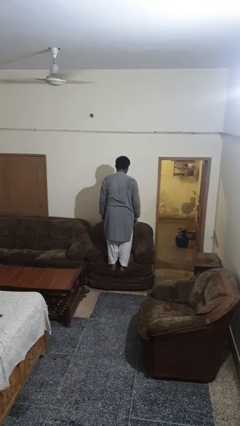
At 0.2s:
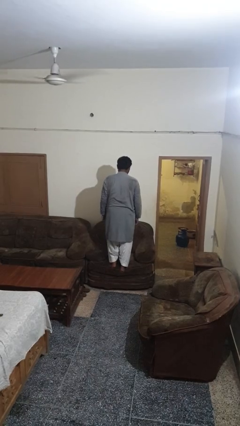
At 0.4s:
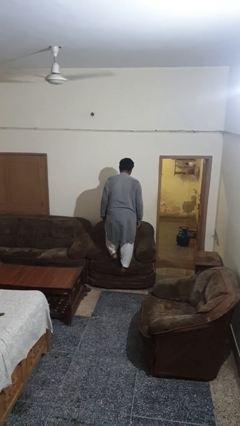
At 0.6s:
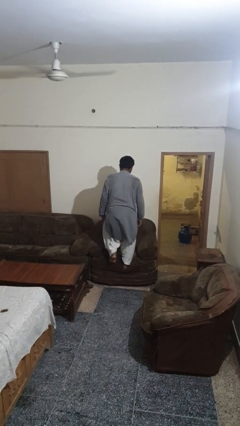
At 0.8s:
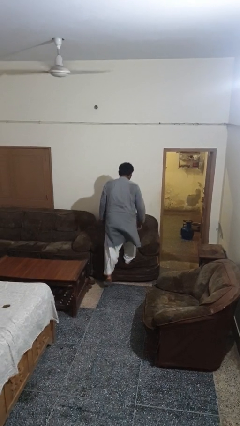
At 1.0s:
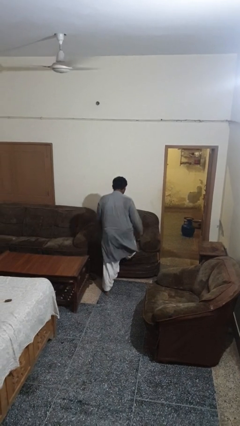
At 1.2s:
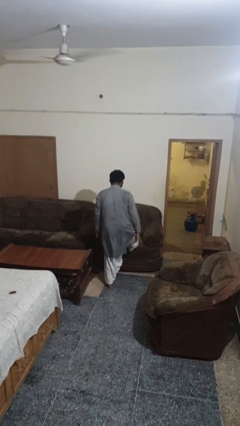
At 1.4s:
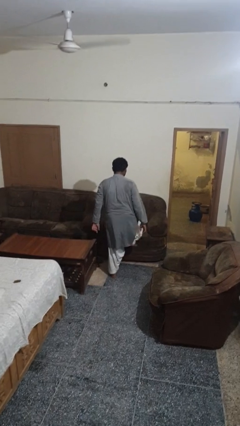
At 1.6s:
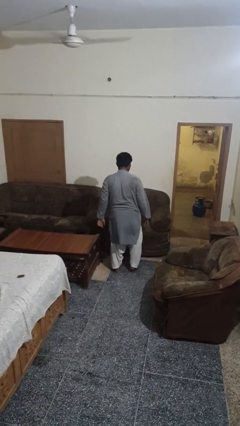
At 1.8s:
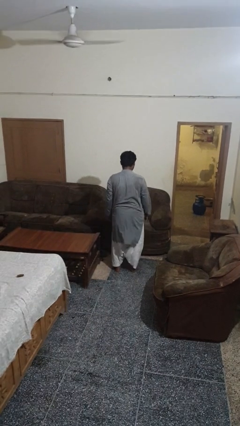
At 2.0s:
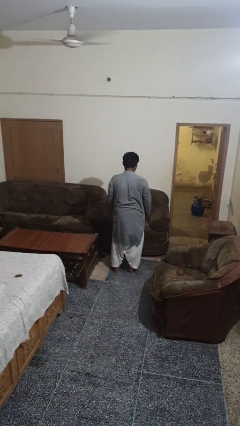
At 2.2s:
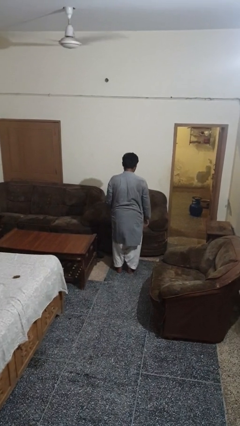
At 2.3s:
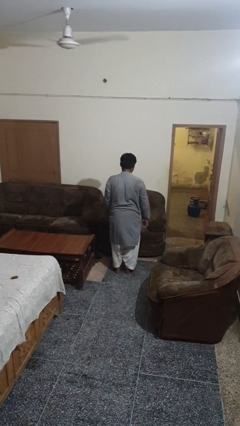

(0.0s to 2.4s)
person climbs off couch

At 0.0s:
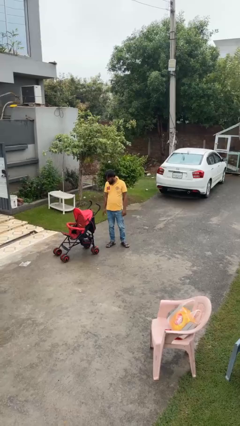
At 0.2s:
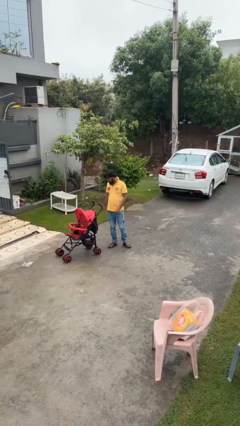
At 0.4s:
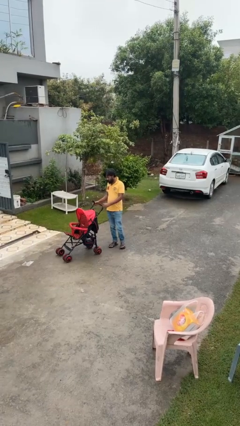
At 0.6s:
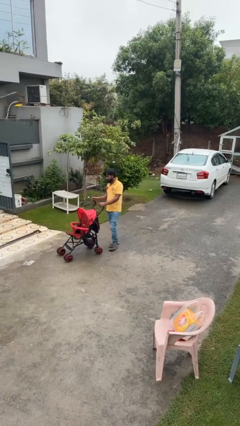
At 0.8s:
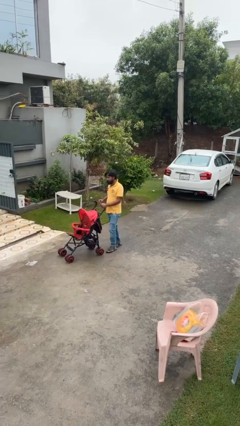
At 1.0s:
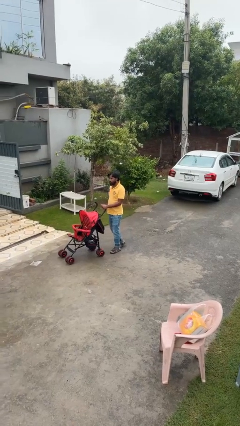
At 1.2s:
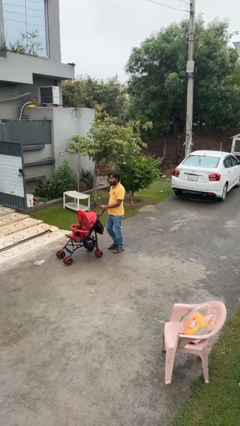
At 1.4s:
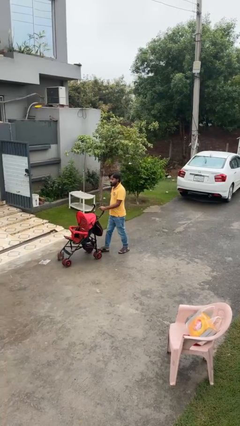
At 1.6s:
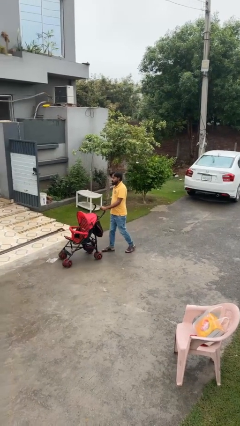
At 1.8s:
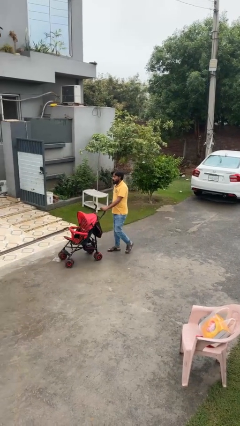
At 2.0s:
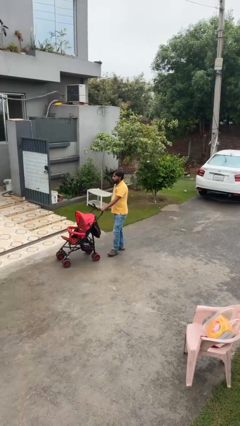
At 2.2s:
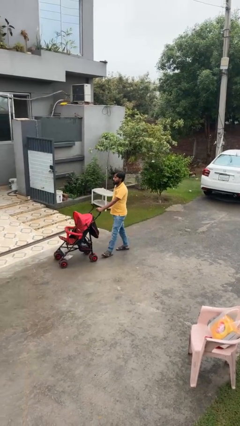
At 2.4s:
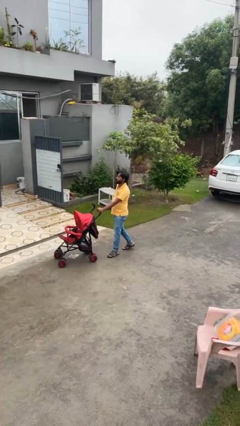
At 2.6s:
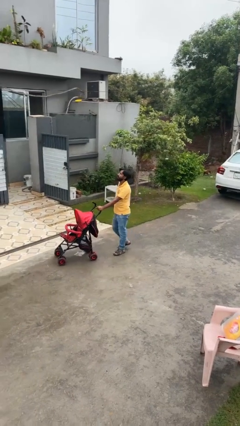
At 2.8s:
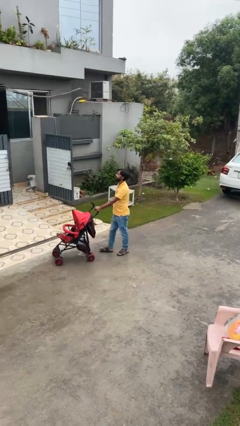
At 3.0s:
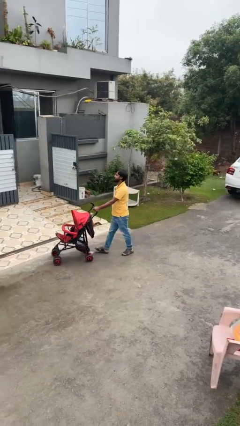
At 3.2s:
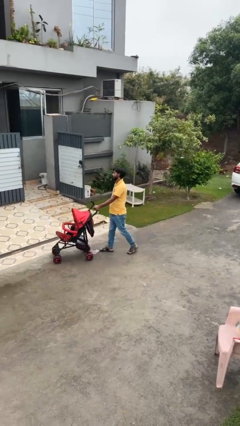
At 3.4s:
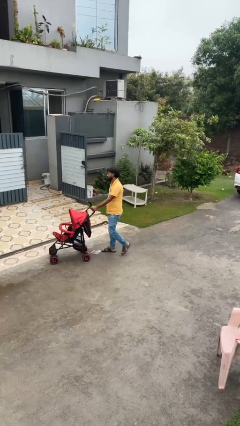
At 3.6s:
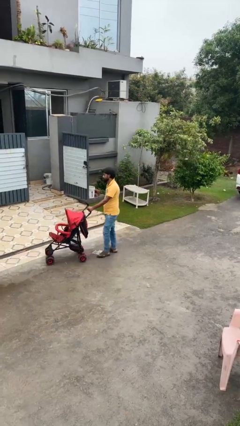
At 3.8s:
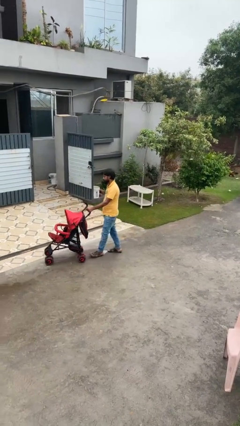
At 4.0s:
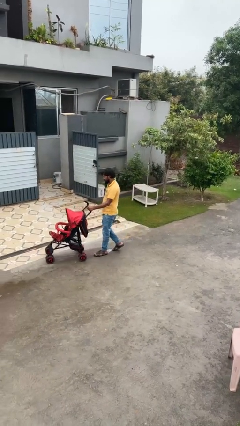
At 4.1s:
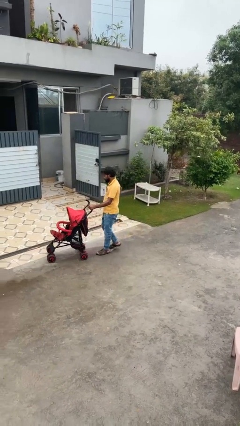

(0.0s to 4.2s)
person pushes wheeled cart

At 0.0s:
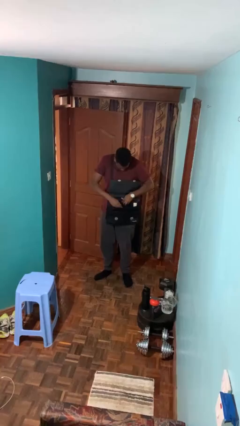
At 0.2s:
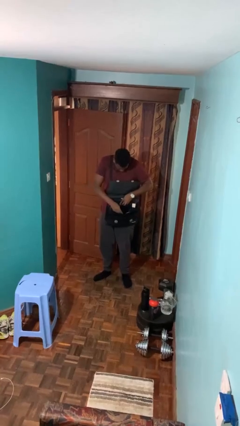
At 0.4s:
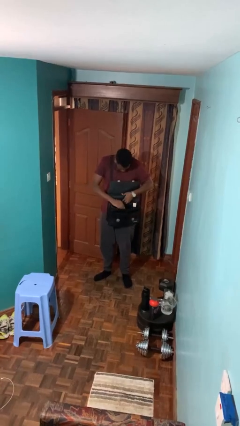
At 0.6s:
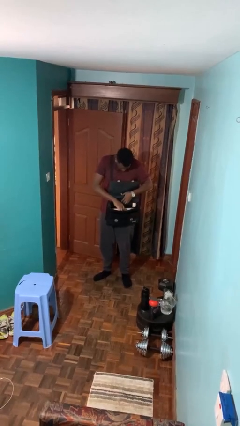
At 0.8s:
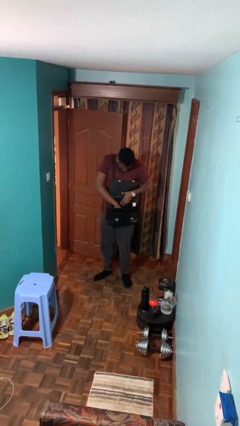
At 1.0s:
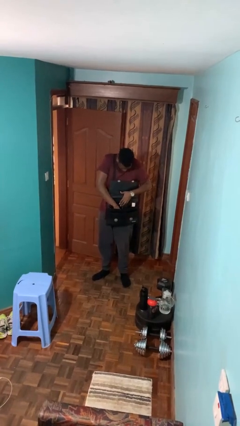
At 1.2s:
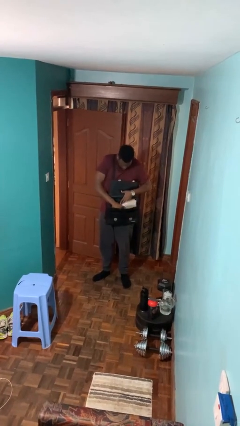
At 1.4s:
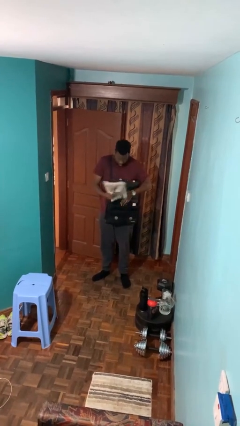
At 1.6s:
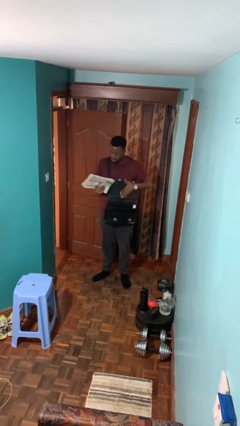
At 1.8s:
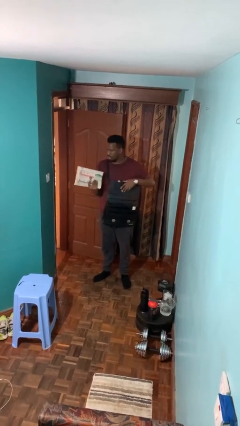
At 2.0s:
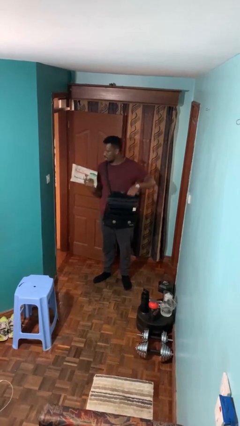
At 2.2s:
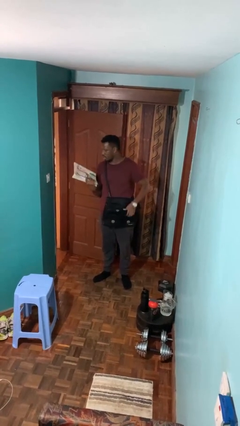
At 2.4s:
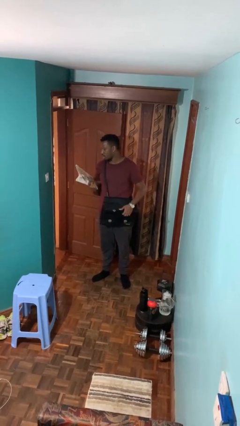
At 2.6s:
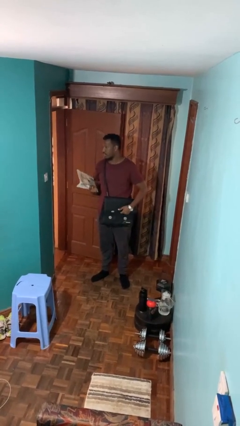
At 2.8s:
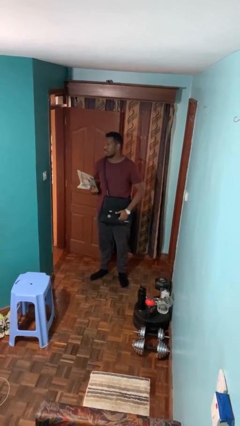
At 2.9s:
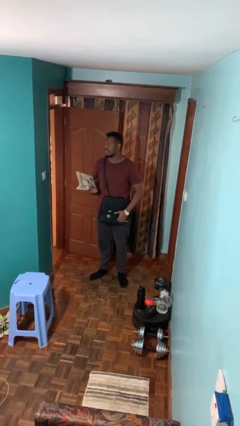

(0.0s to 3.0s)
person takes object from purse

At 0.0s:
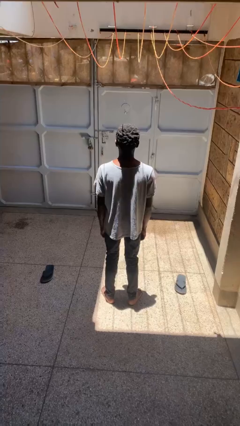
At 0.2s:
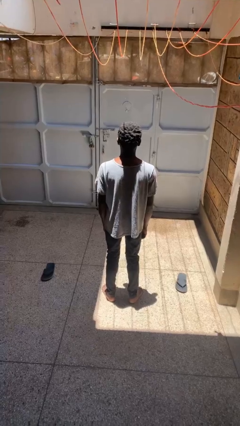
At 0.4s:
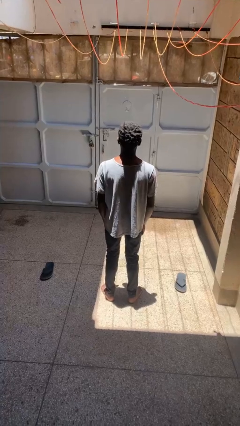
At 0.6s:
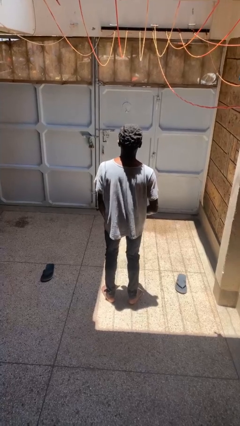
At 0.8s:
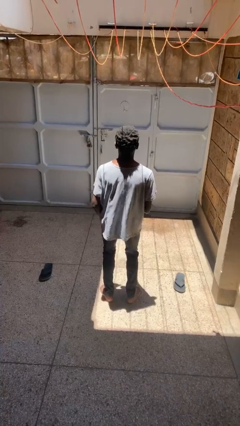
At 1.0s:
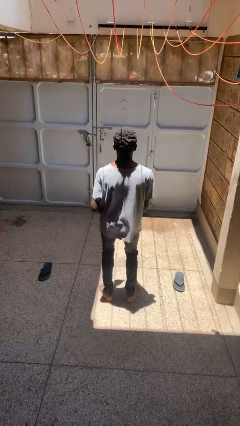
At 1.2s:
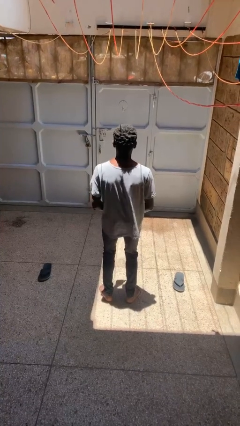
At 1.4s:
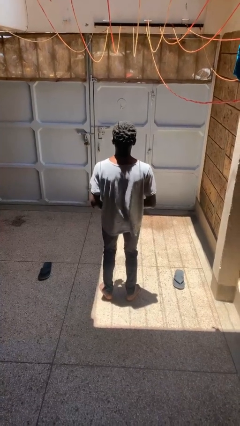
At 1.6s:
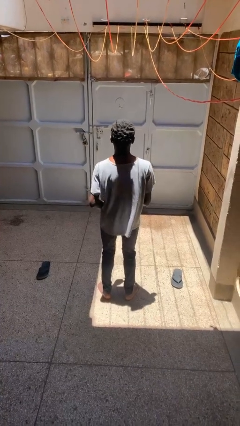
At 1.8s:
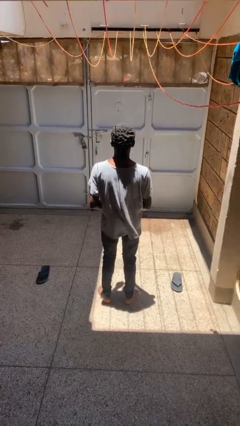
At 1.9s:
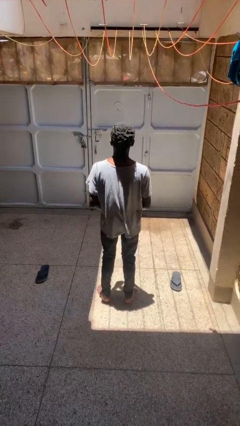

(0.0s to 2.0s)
person dances in place

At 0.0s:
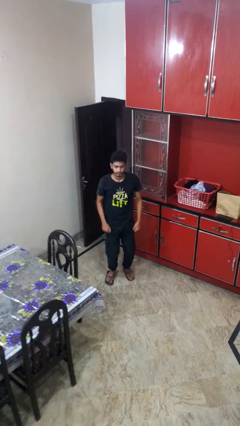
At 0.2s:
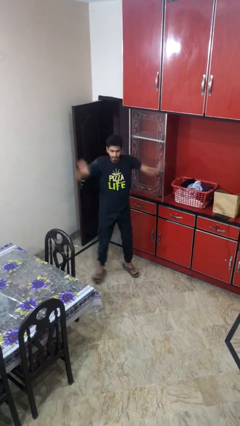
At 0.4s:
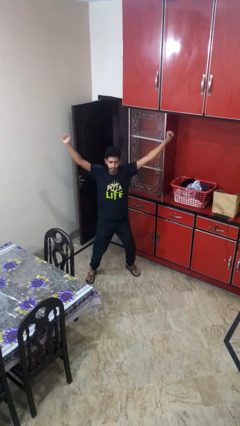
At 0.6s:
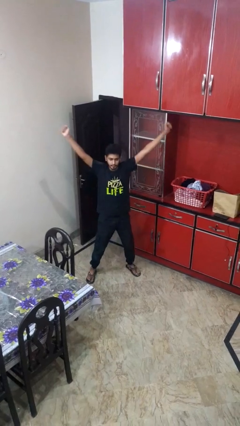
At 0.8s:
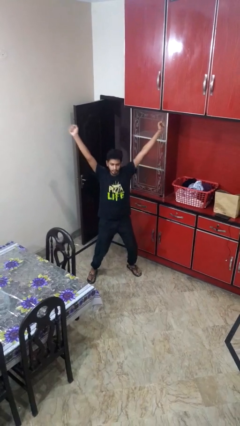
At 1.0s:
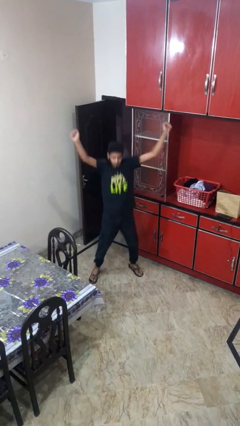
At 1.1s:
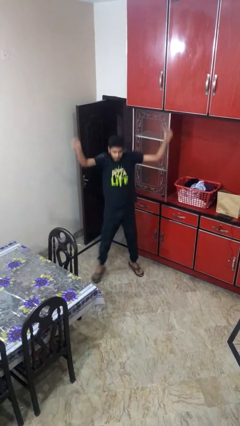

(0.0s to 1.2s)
person exercises with jumping jacks

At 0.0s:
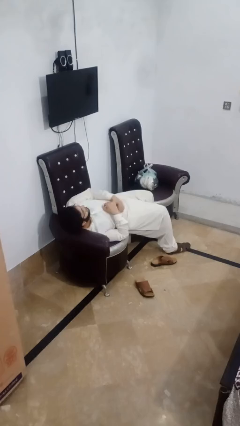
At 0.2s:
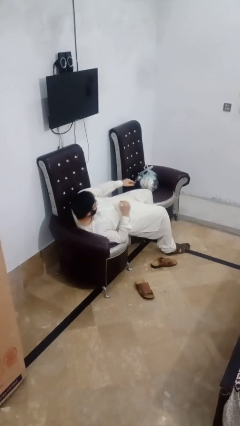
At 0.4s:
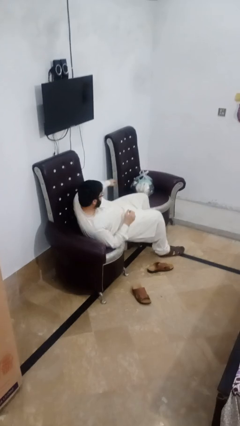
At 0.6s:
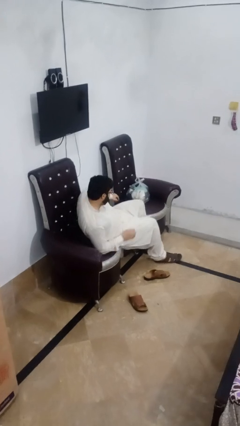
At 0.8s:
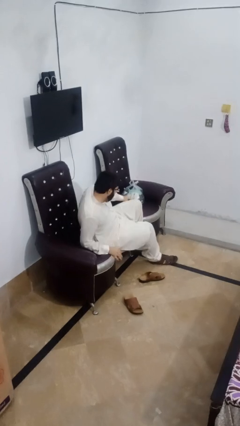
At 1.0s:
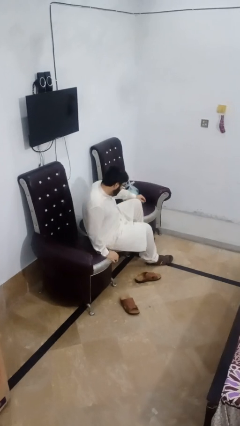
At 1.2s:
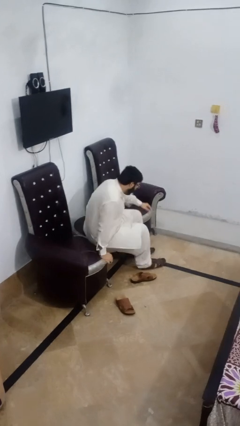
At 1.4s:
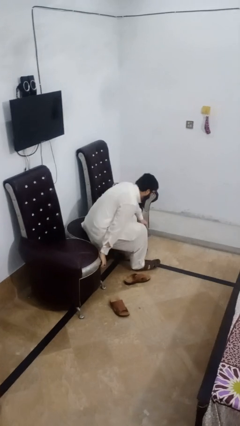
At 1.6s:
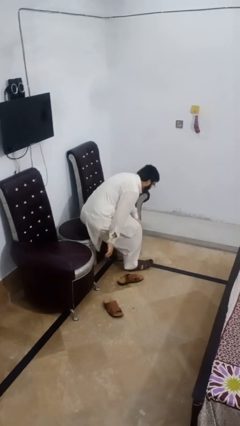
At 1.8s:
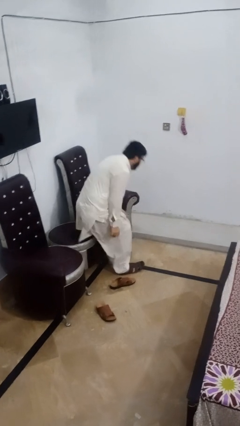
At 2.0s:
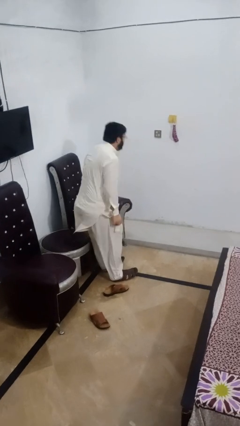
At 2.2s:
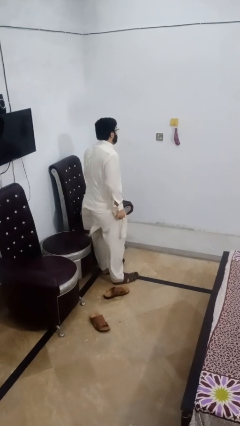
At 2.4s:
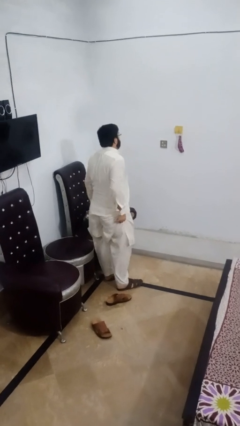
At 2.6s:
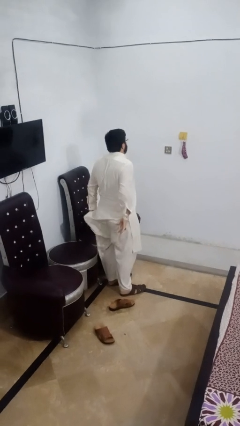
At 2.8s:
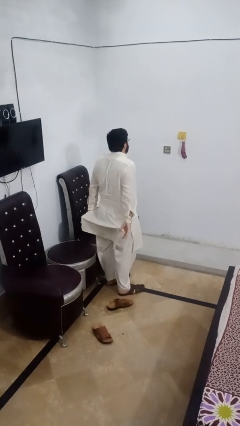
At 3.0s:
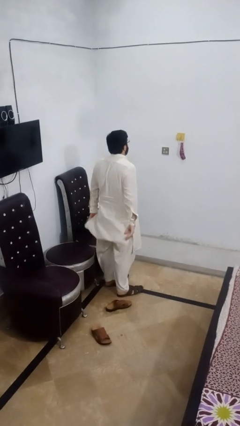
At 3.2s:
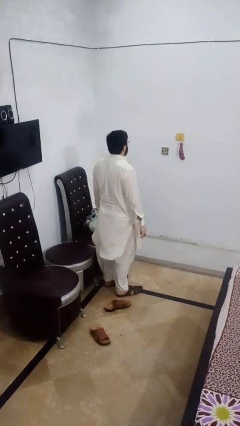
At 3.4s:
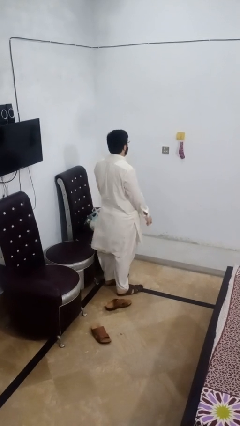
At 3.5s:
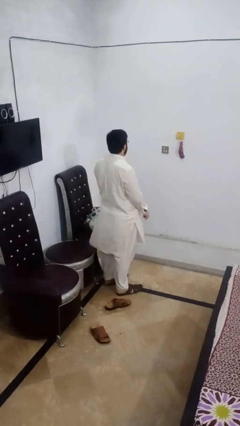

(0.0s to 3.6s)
person stands up

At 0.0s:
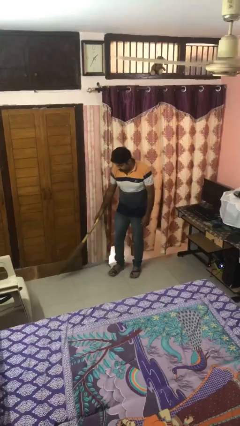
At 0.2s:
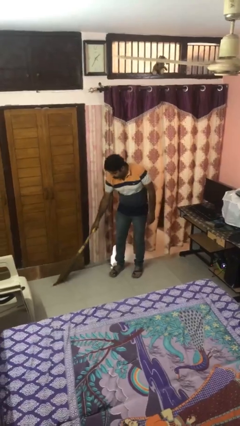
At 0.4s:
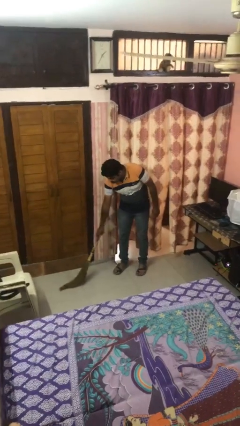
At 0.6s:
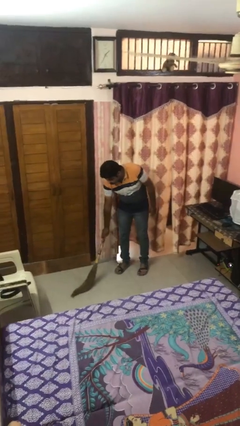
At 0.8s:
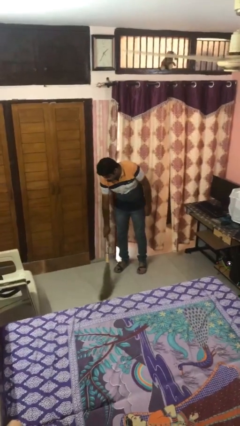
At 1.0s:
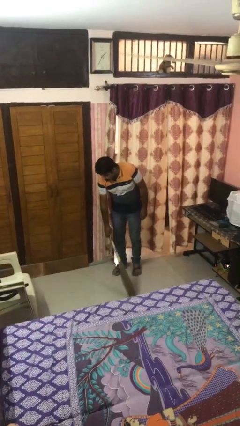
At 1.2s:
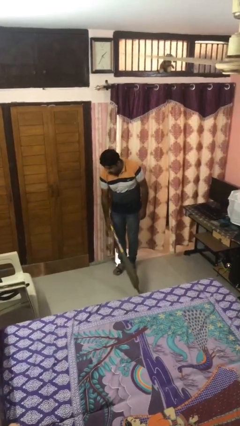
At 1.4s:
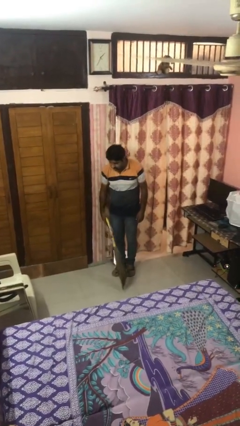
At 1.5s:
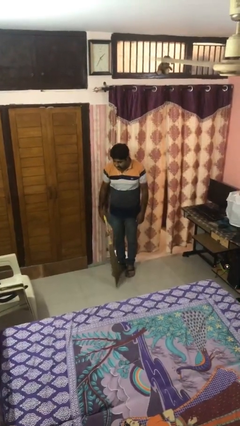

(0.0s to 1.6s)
person sweeps floor
